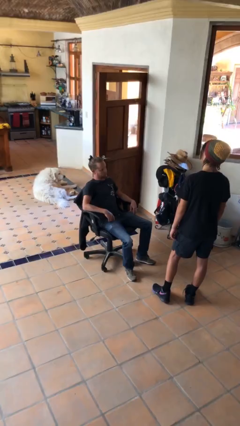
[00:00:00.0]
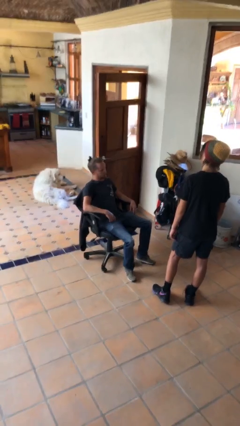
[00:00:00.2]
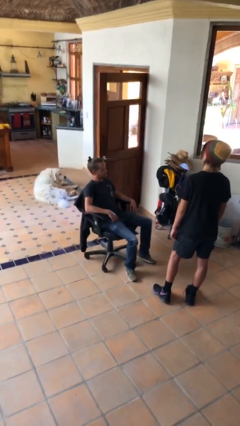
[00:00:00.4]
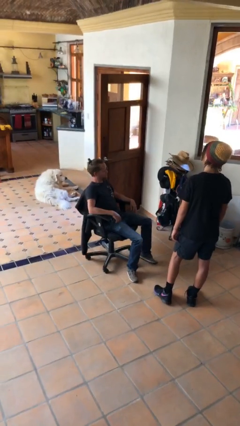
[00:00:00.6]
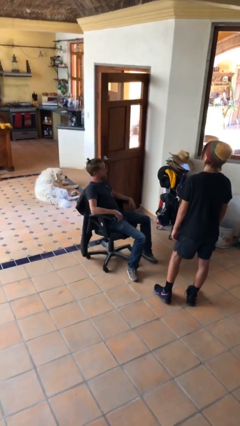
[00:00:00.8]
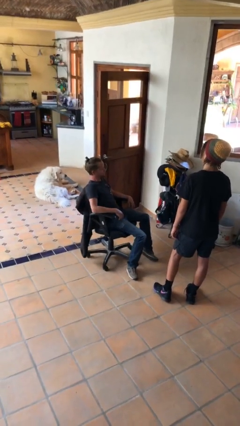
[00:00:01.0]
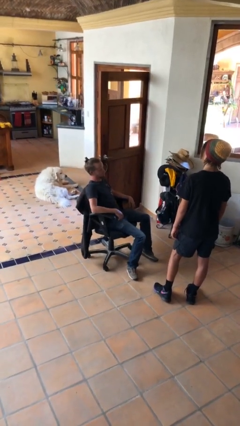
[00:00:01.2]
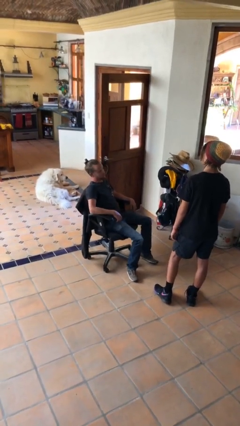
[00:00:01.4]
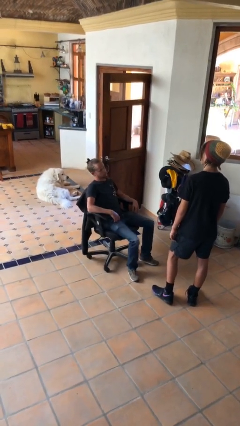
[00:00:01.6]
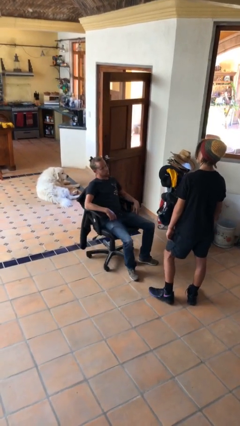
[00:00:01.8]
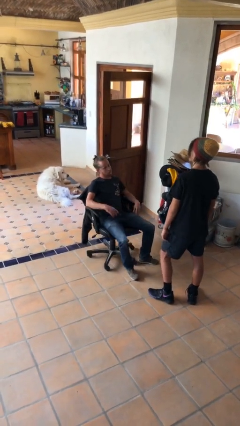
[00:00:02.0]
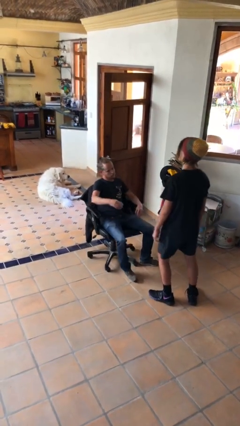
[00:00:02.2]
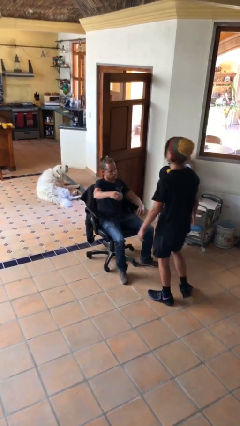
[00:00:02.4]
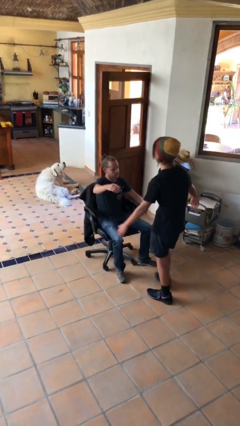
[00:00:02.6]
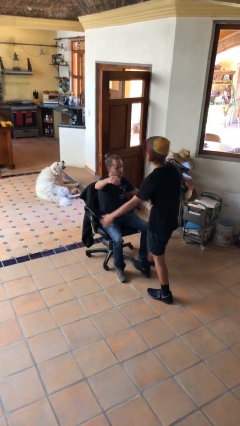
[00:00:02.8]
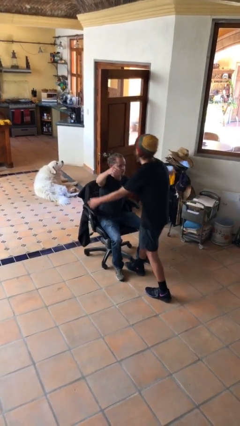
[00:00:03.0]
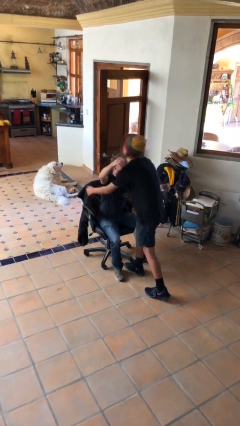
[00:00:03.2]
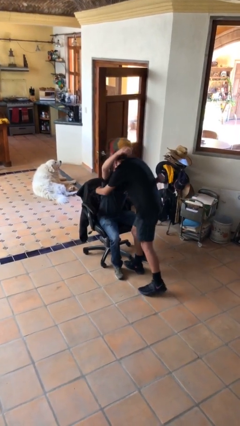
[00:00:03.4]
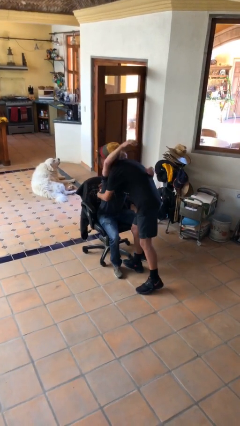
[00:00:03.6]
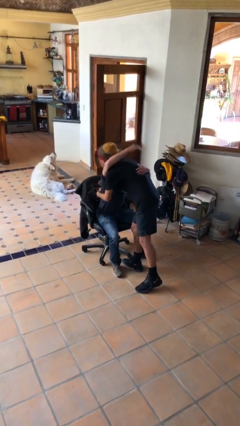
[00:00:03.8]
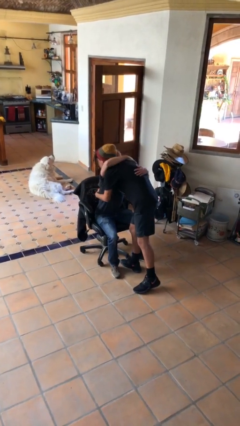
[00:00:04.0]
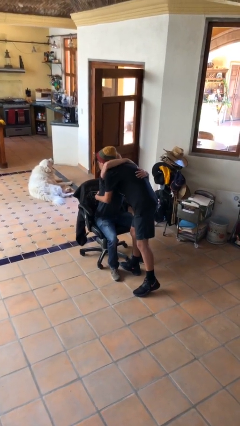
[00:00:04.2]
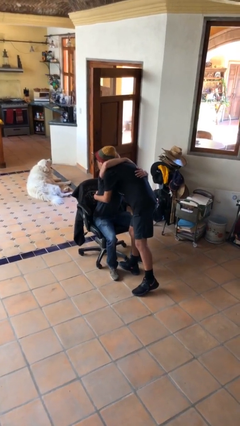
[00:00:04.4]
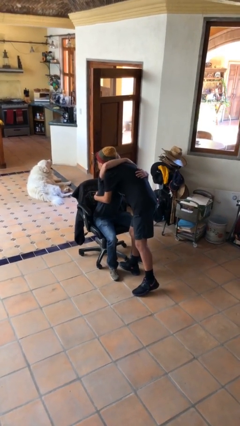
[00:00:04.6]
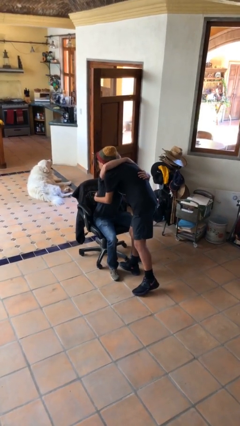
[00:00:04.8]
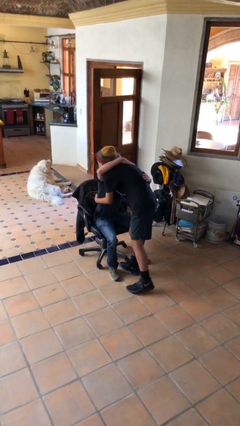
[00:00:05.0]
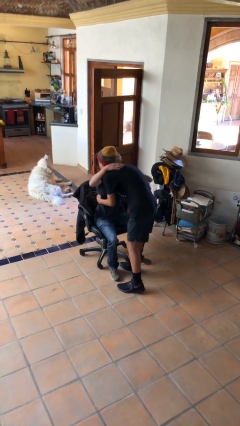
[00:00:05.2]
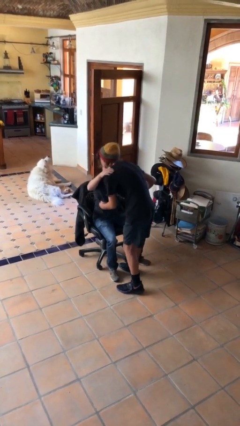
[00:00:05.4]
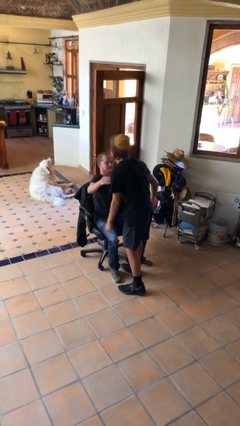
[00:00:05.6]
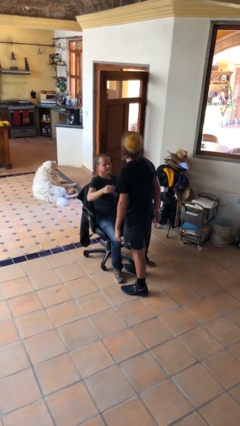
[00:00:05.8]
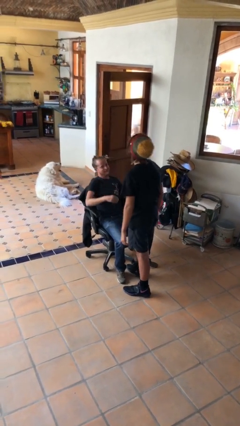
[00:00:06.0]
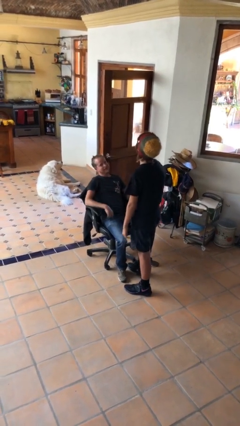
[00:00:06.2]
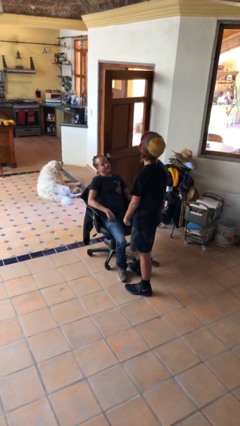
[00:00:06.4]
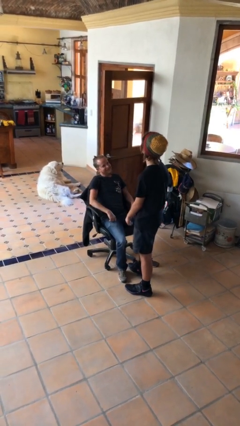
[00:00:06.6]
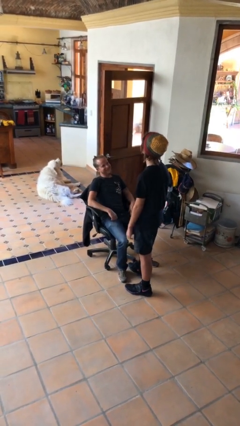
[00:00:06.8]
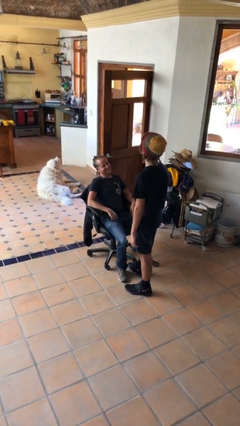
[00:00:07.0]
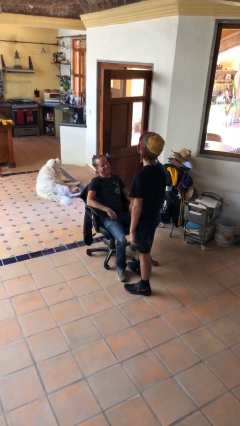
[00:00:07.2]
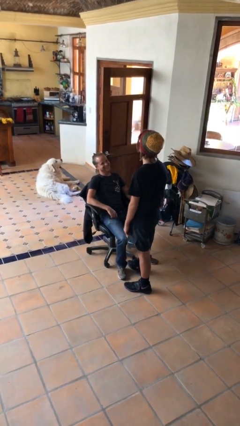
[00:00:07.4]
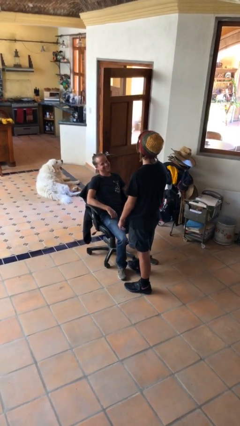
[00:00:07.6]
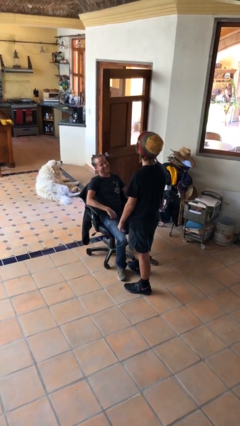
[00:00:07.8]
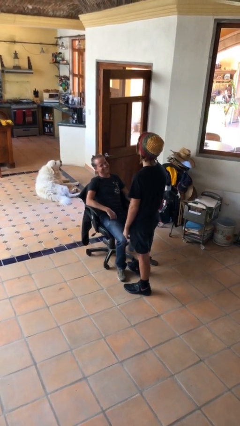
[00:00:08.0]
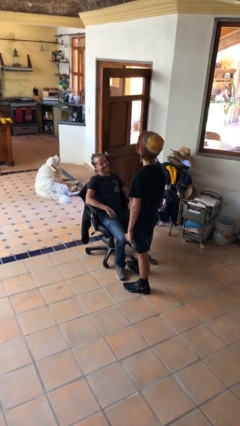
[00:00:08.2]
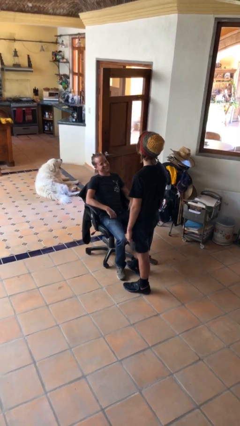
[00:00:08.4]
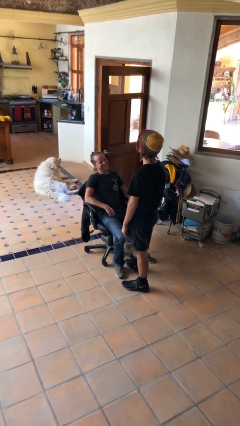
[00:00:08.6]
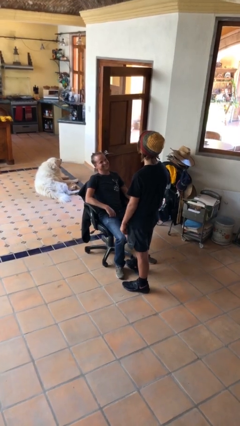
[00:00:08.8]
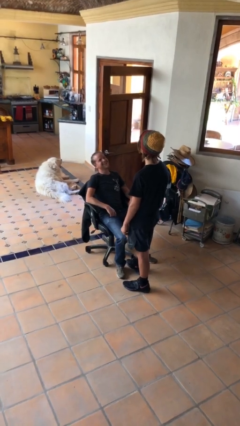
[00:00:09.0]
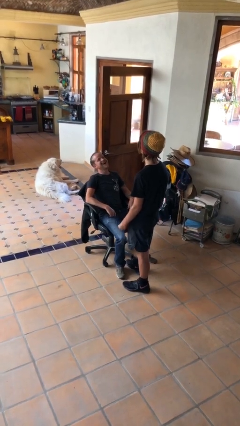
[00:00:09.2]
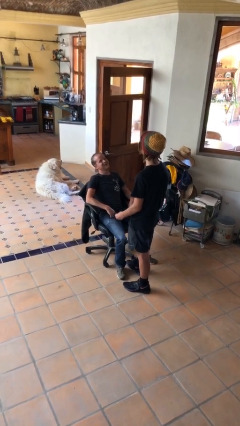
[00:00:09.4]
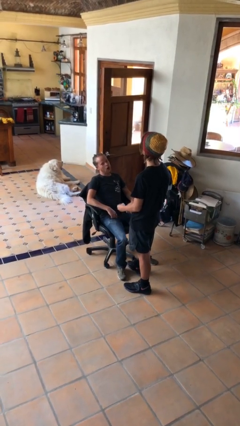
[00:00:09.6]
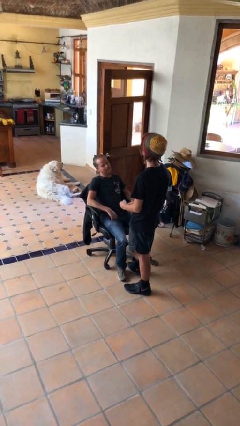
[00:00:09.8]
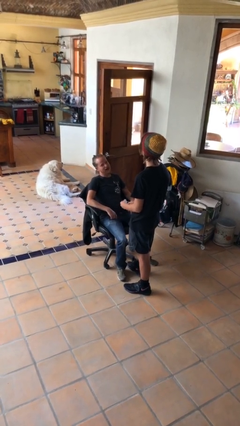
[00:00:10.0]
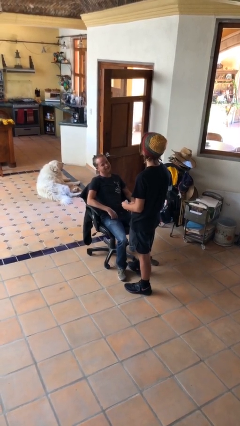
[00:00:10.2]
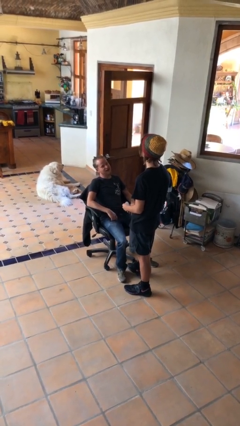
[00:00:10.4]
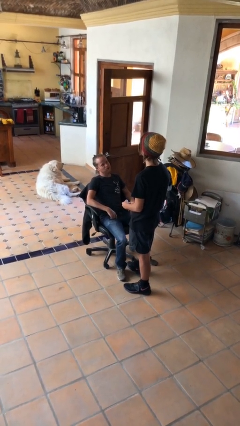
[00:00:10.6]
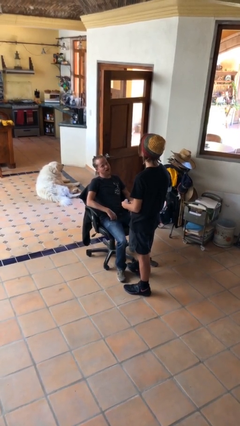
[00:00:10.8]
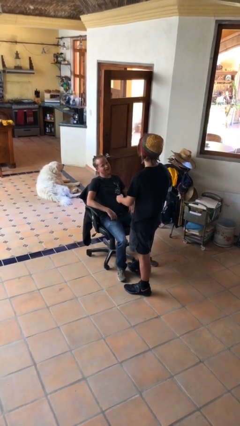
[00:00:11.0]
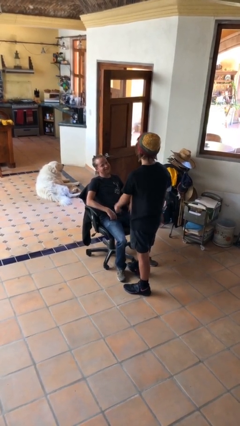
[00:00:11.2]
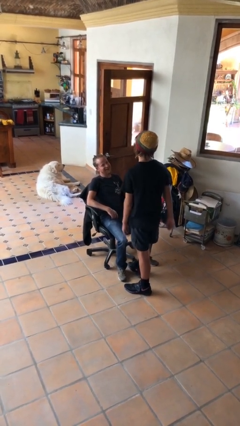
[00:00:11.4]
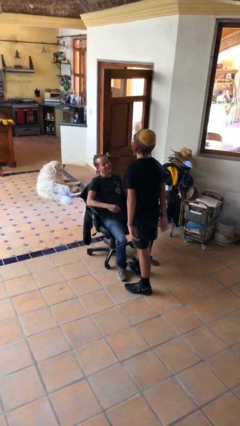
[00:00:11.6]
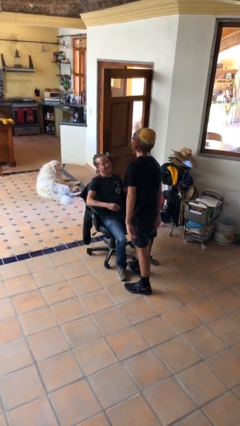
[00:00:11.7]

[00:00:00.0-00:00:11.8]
person embraces person

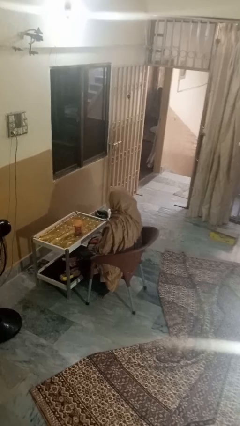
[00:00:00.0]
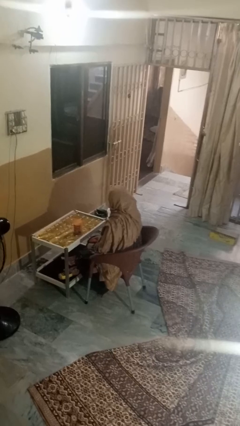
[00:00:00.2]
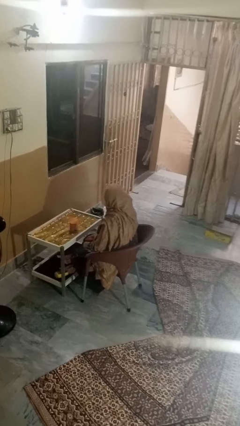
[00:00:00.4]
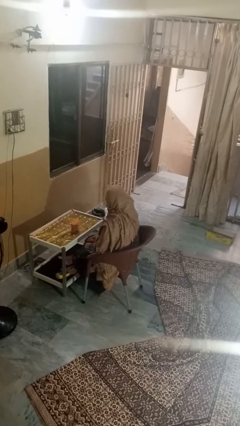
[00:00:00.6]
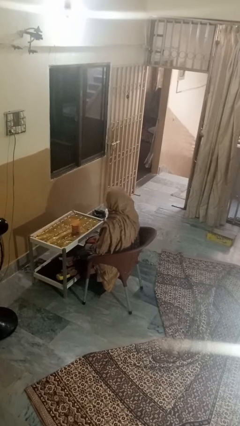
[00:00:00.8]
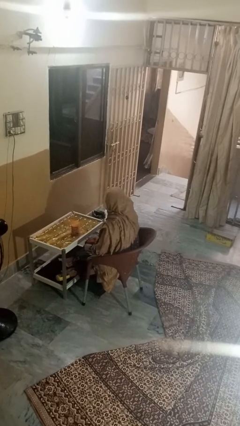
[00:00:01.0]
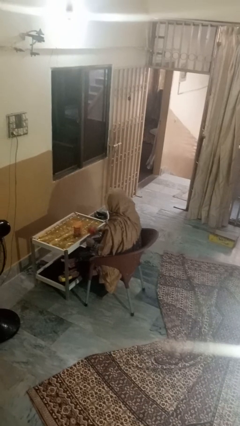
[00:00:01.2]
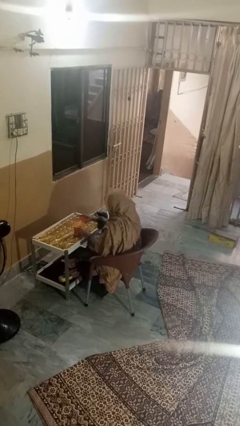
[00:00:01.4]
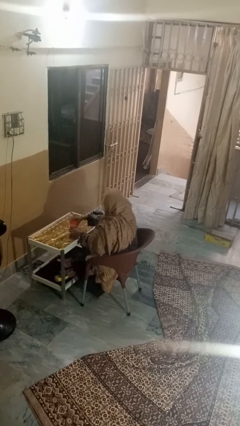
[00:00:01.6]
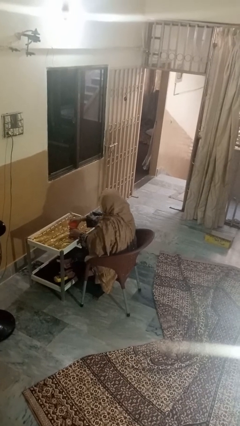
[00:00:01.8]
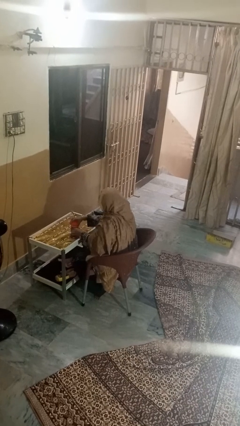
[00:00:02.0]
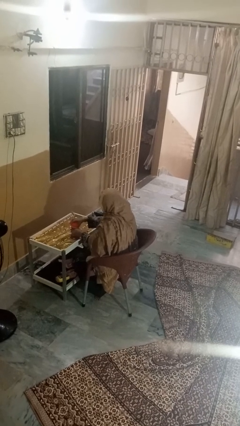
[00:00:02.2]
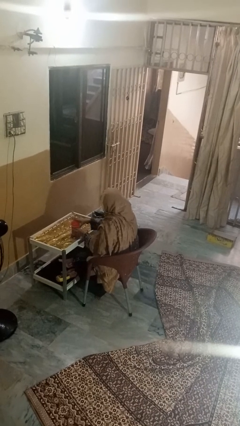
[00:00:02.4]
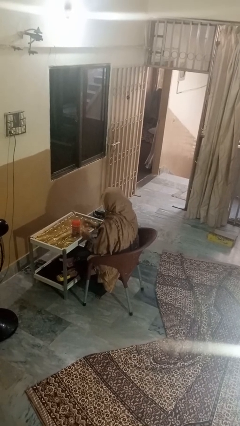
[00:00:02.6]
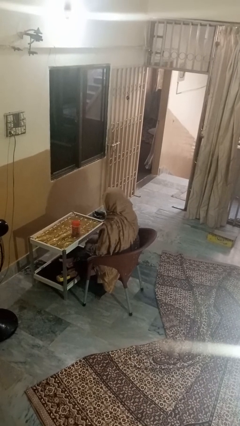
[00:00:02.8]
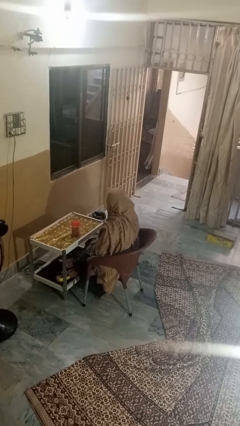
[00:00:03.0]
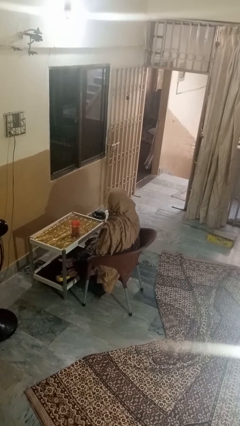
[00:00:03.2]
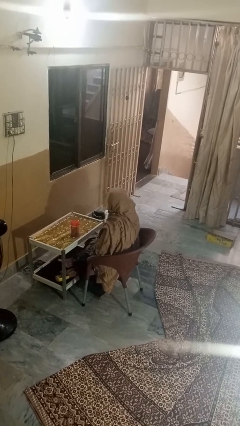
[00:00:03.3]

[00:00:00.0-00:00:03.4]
person closes jar

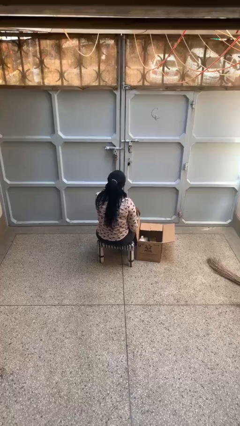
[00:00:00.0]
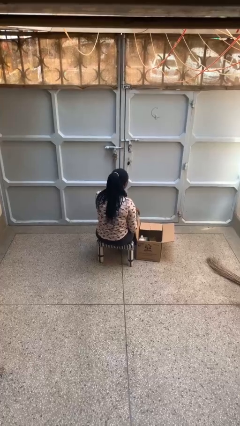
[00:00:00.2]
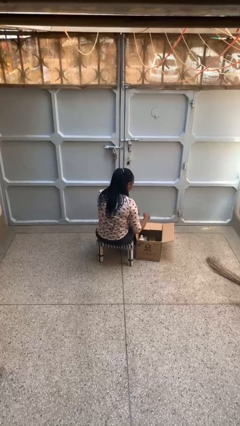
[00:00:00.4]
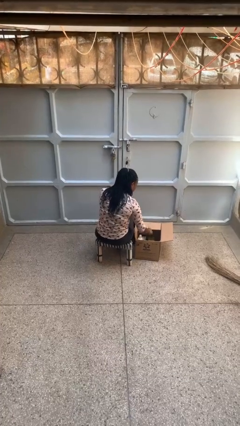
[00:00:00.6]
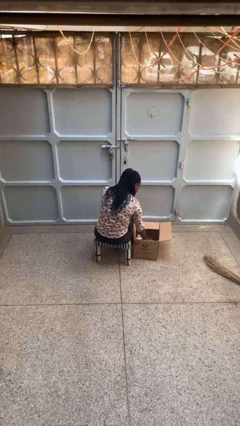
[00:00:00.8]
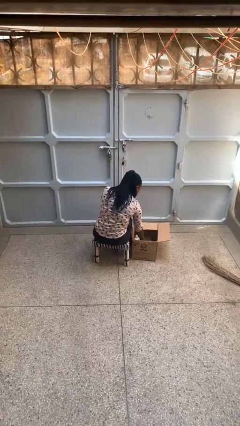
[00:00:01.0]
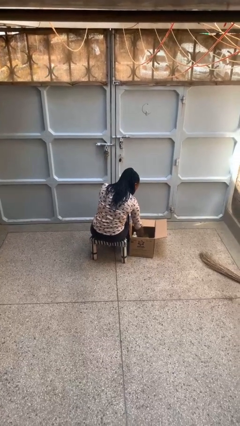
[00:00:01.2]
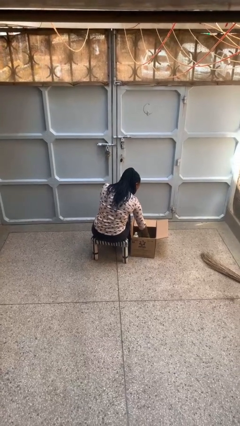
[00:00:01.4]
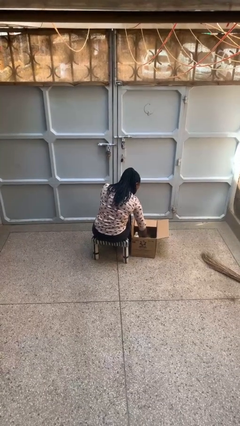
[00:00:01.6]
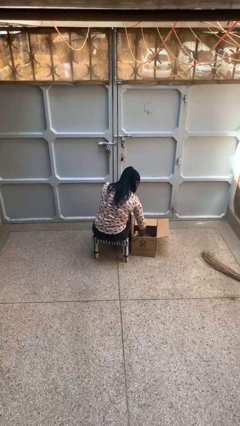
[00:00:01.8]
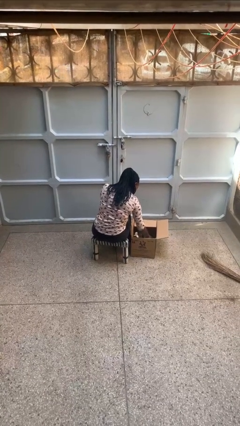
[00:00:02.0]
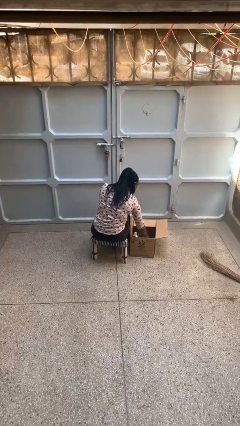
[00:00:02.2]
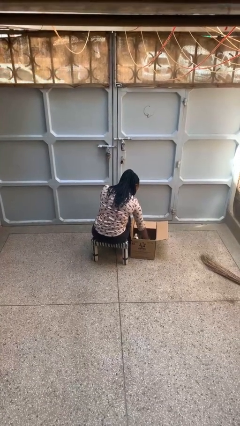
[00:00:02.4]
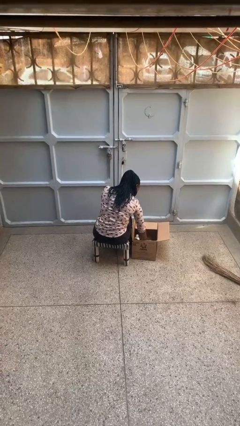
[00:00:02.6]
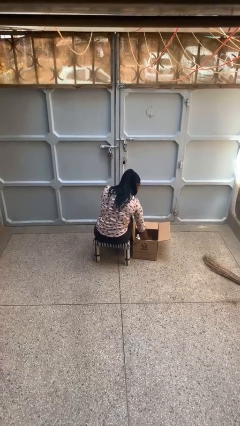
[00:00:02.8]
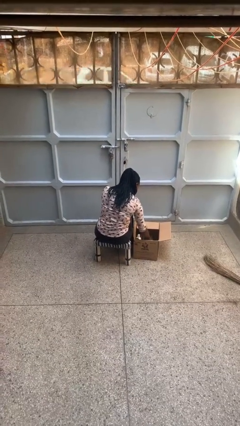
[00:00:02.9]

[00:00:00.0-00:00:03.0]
person searches in box
